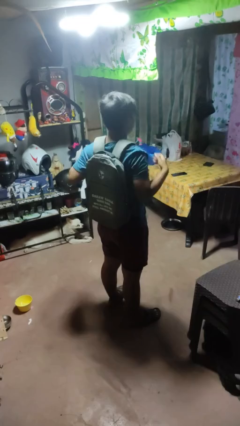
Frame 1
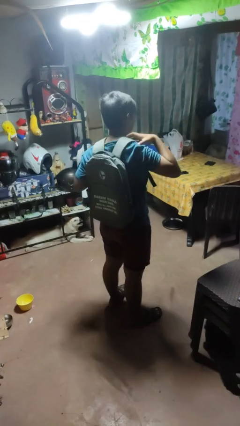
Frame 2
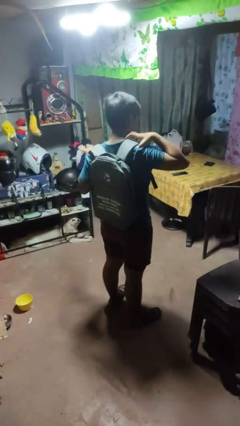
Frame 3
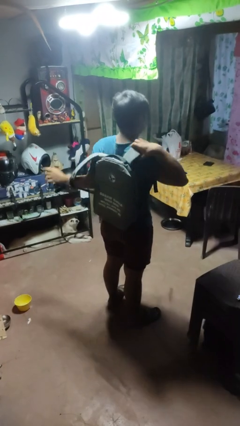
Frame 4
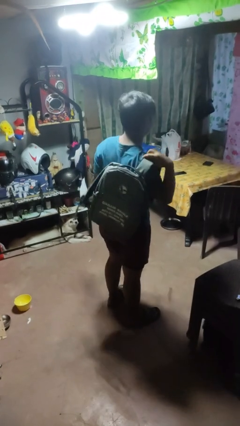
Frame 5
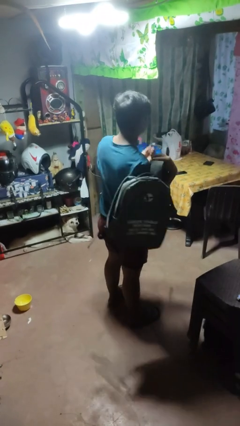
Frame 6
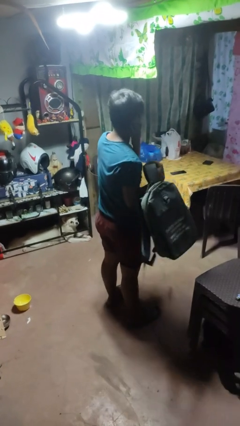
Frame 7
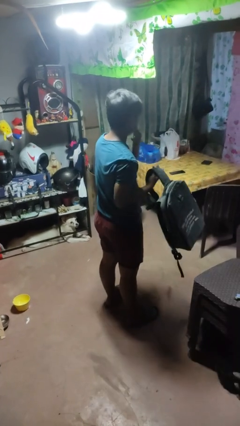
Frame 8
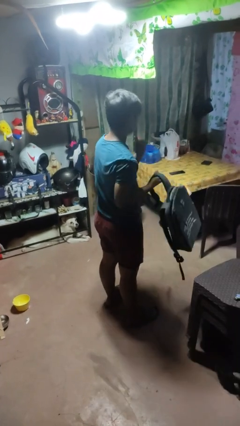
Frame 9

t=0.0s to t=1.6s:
person takes off backpack

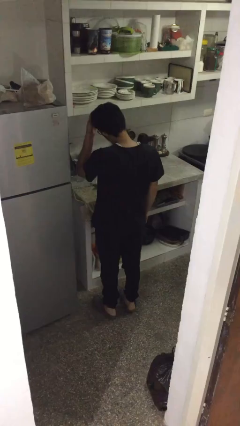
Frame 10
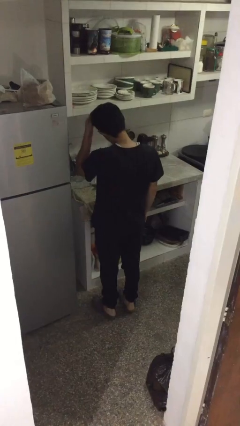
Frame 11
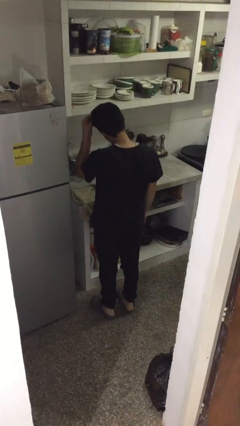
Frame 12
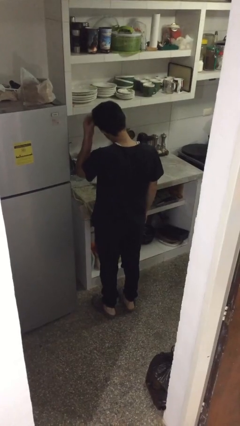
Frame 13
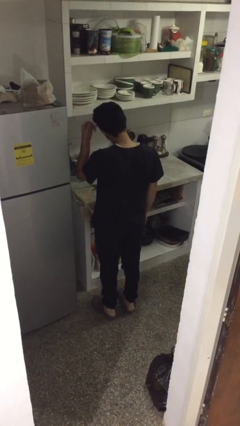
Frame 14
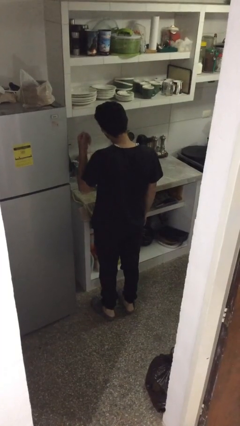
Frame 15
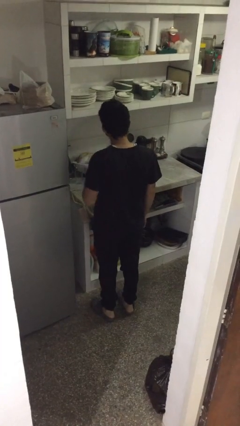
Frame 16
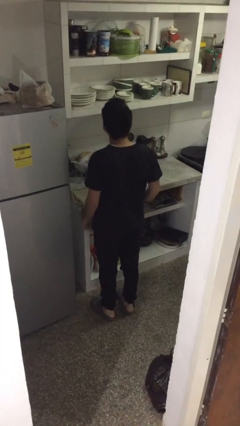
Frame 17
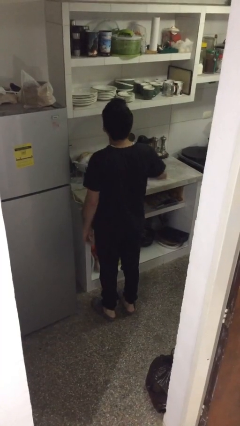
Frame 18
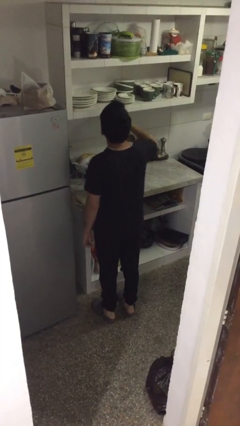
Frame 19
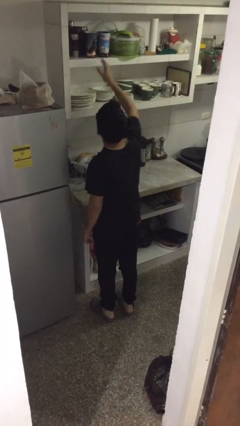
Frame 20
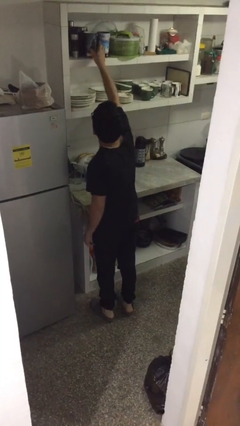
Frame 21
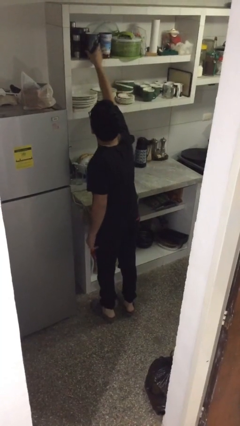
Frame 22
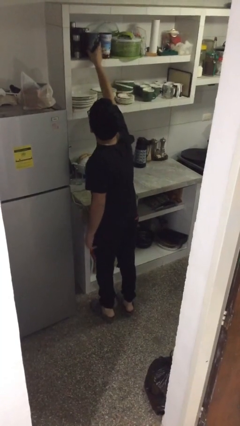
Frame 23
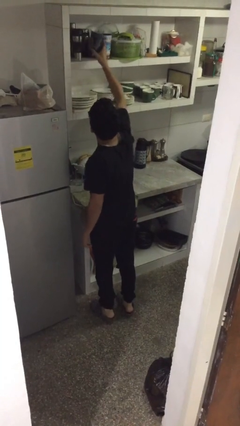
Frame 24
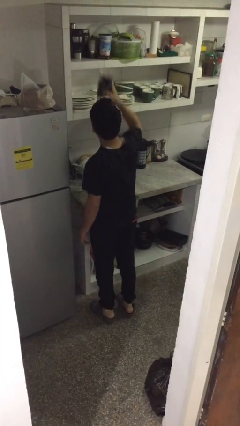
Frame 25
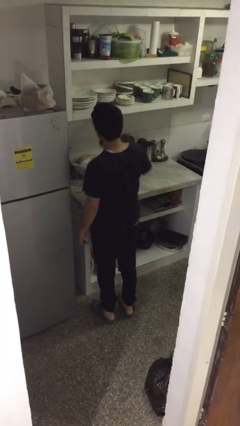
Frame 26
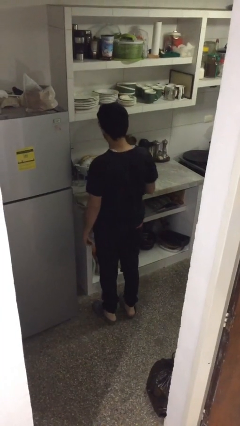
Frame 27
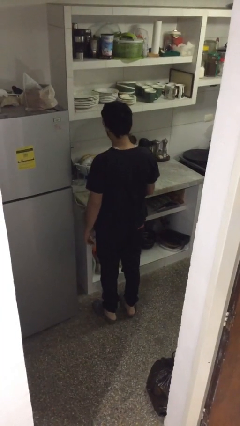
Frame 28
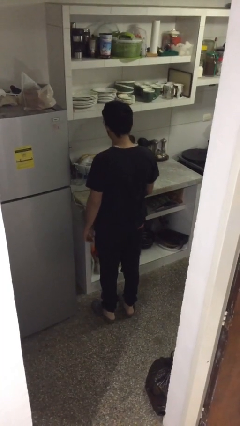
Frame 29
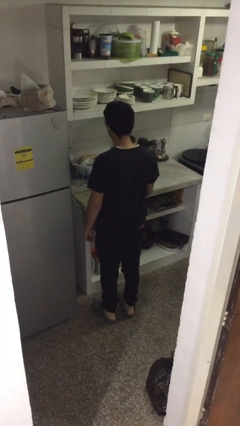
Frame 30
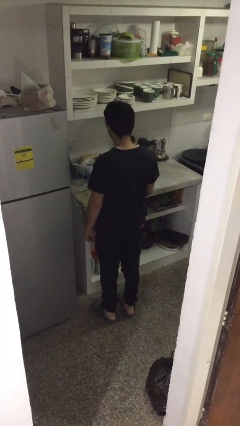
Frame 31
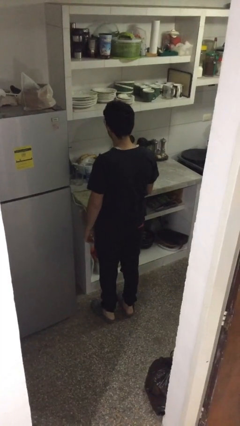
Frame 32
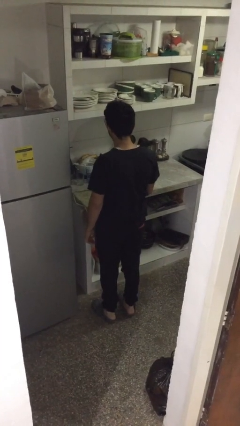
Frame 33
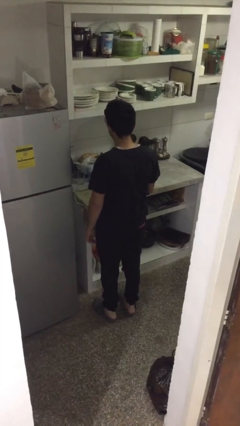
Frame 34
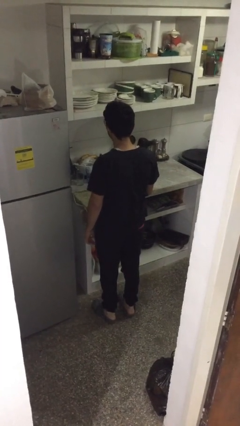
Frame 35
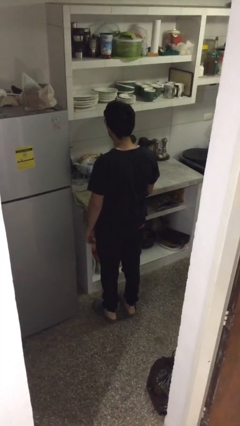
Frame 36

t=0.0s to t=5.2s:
person picks up object from shelf

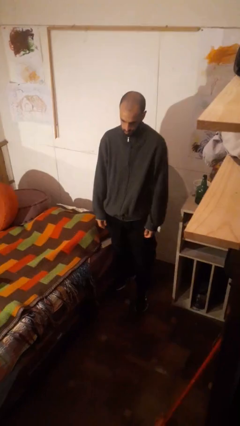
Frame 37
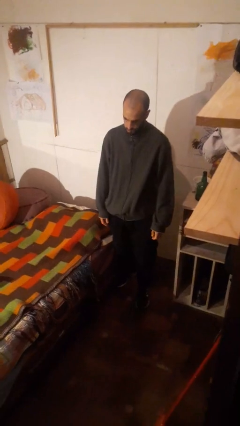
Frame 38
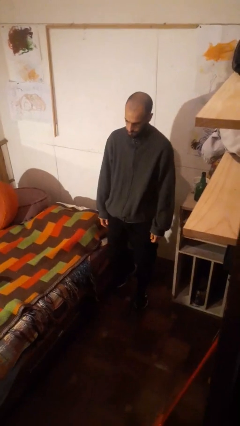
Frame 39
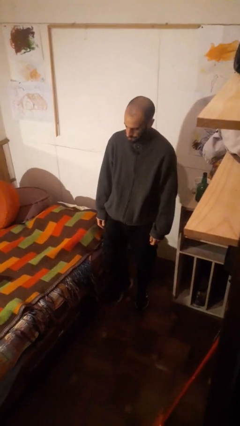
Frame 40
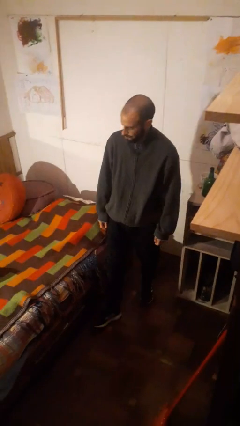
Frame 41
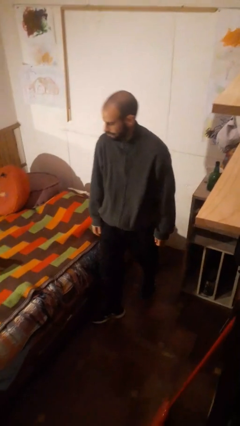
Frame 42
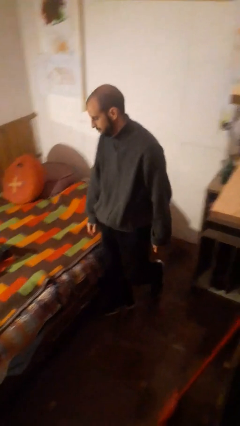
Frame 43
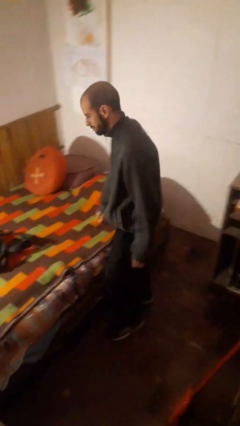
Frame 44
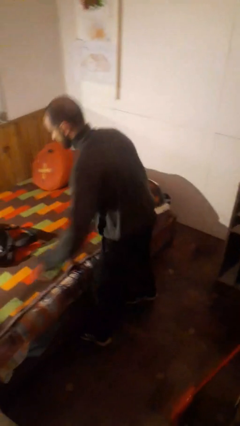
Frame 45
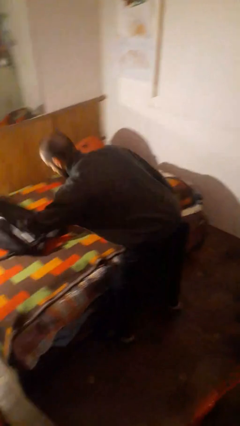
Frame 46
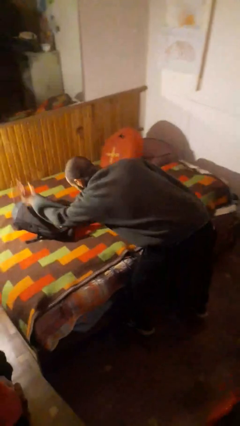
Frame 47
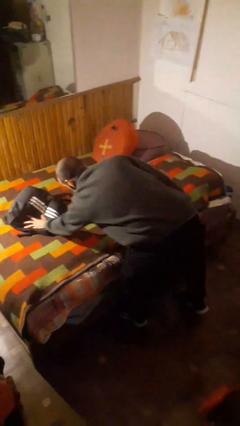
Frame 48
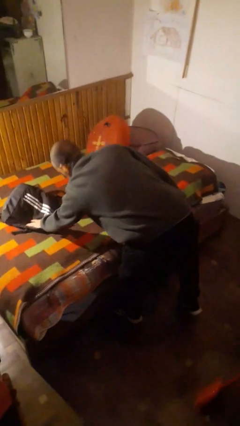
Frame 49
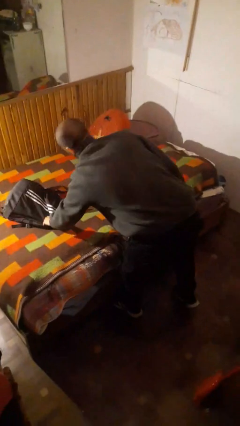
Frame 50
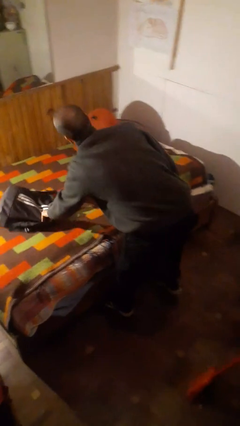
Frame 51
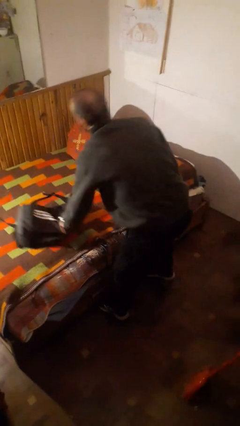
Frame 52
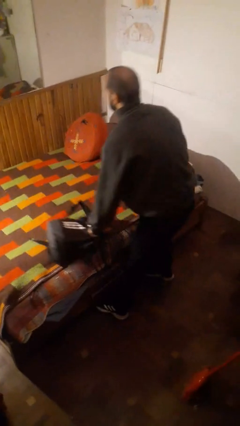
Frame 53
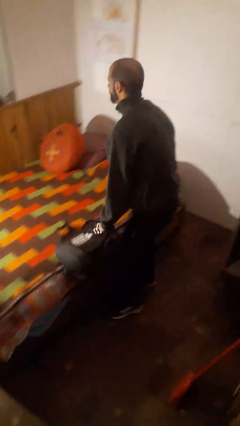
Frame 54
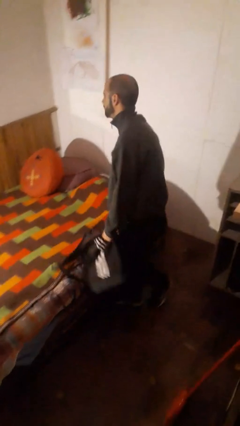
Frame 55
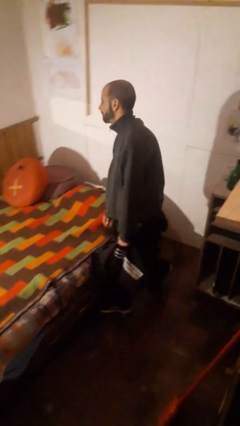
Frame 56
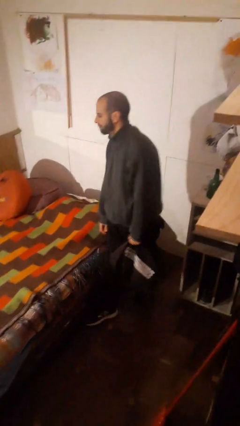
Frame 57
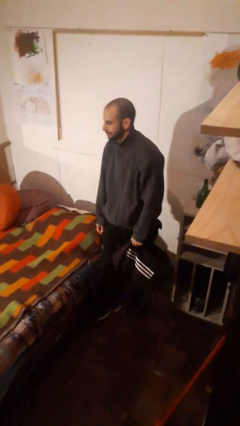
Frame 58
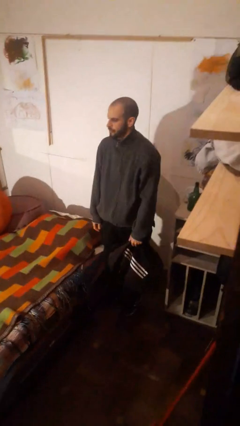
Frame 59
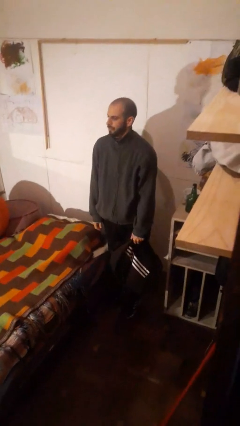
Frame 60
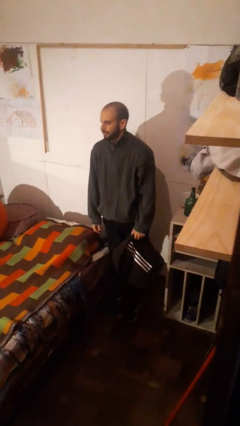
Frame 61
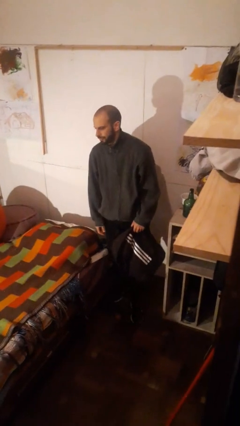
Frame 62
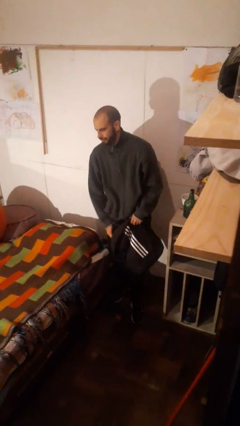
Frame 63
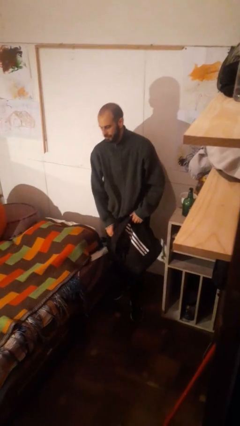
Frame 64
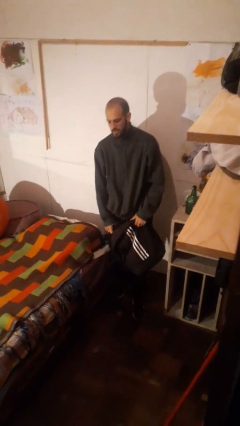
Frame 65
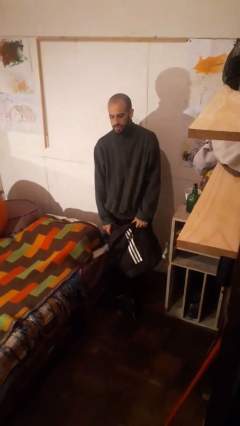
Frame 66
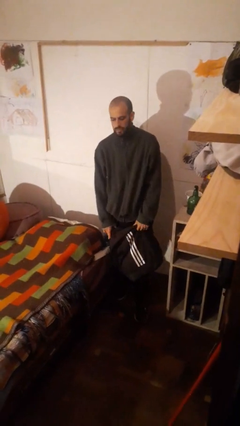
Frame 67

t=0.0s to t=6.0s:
person picks up object from bed

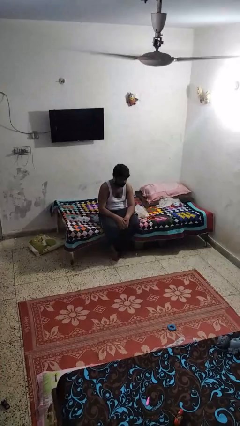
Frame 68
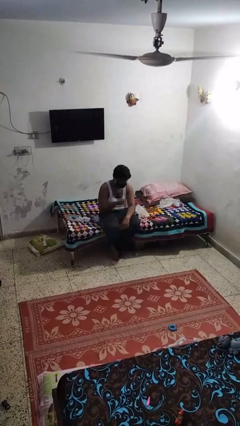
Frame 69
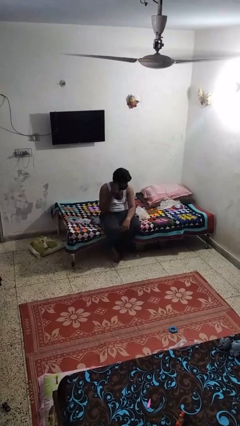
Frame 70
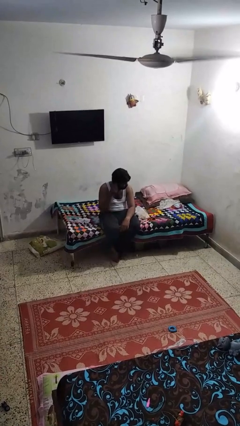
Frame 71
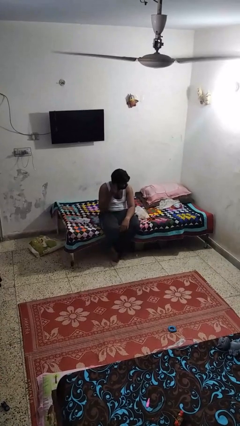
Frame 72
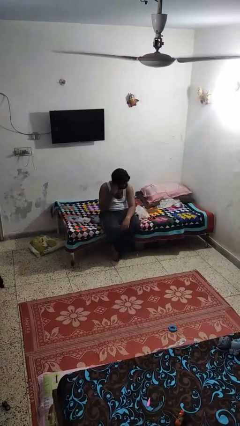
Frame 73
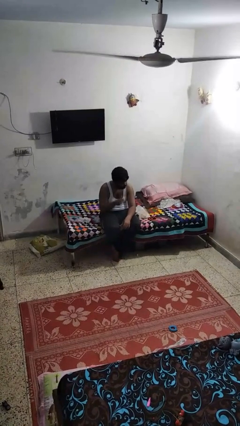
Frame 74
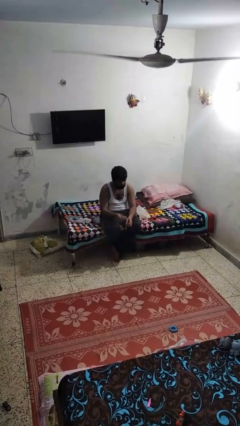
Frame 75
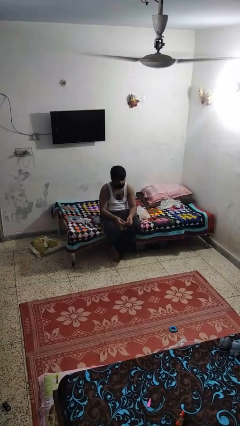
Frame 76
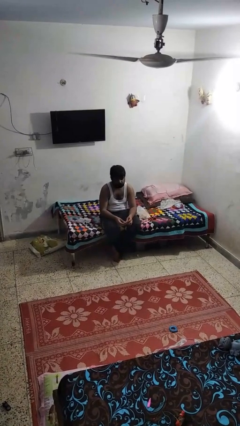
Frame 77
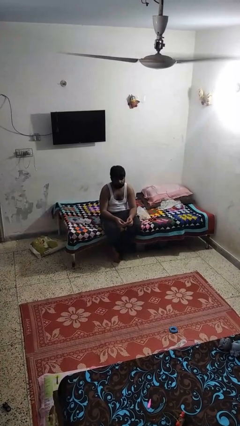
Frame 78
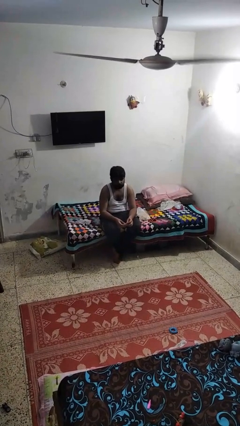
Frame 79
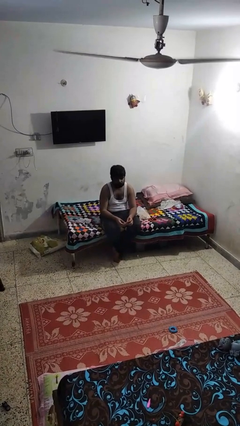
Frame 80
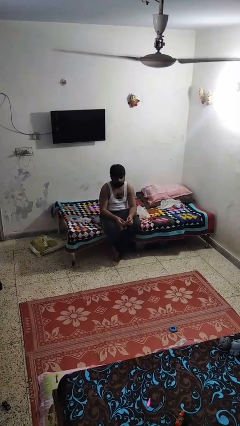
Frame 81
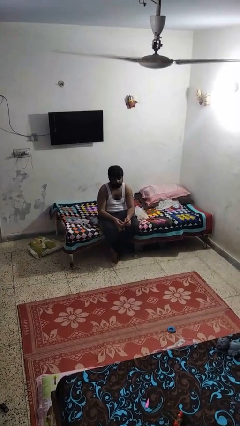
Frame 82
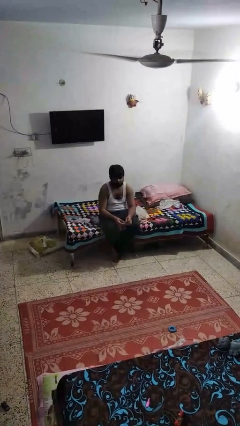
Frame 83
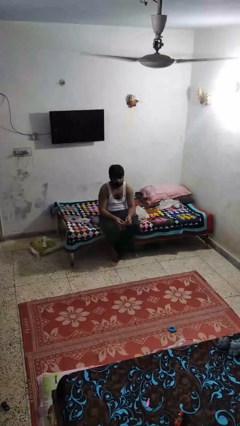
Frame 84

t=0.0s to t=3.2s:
person takes off earrings

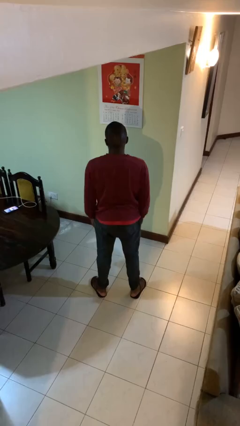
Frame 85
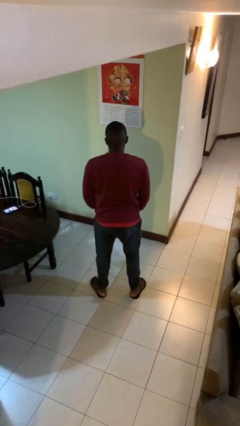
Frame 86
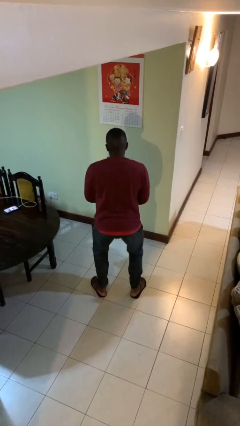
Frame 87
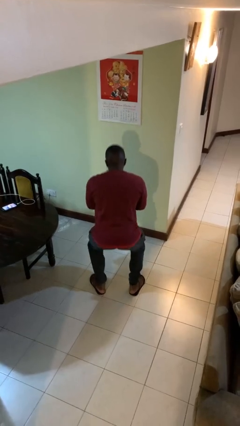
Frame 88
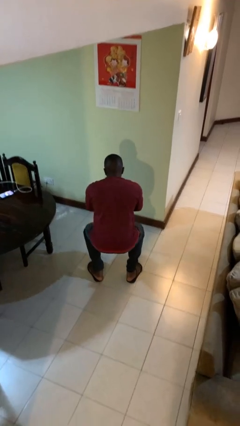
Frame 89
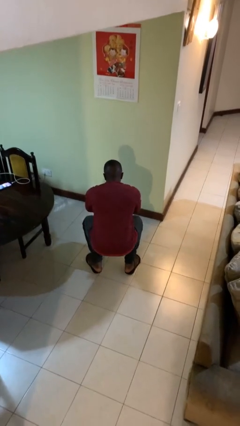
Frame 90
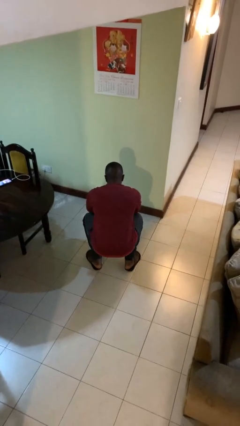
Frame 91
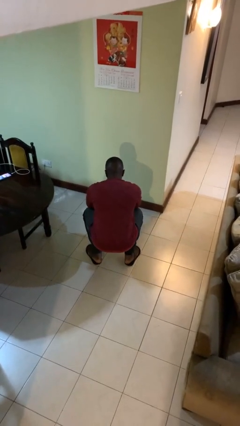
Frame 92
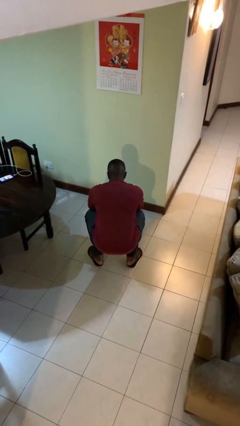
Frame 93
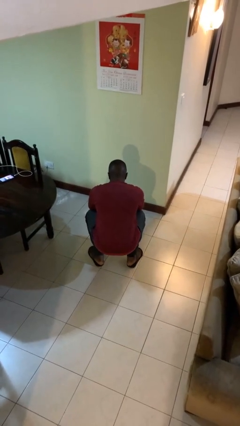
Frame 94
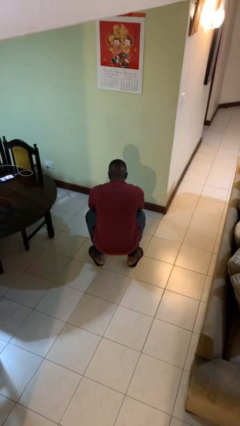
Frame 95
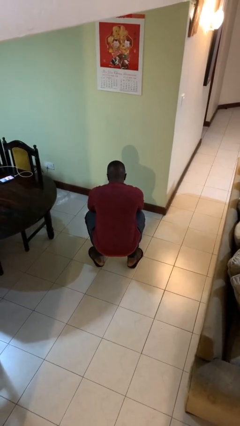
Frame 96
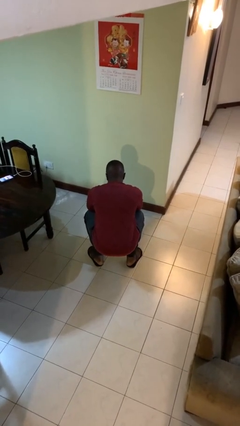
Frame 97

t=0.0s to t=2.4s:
person squats
